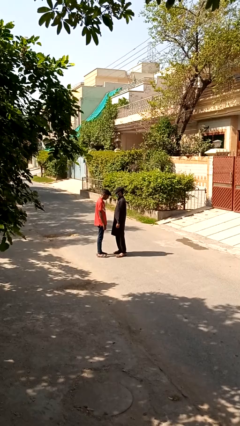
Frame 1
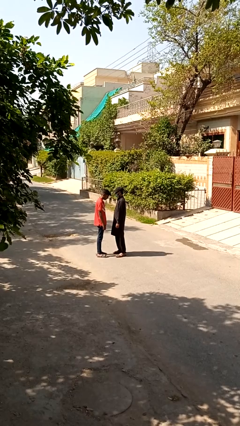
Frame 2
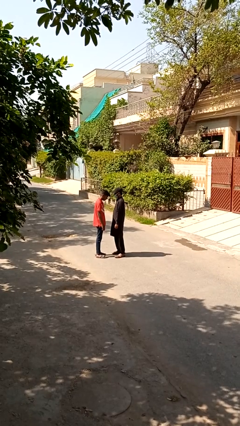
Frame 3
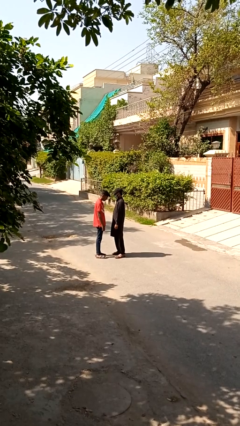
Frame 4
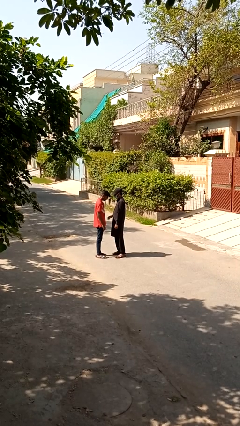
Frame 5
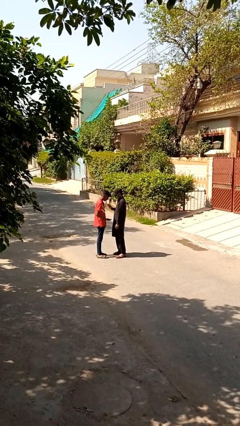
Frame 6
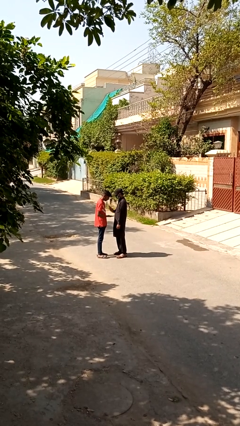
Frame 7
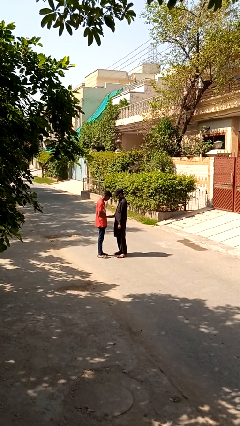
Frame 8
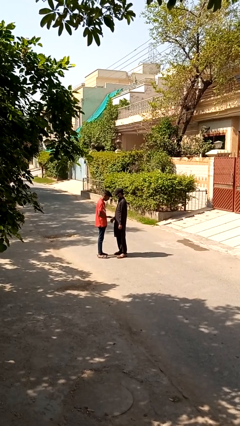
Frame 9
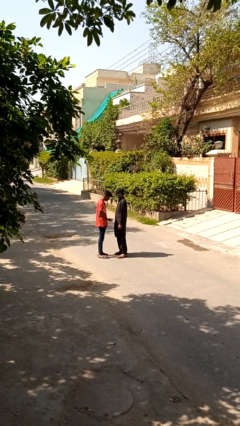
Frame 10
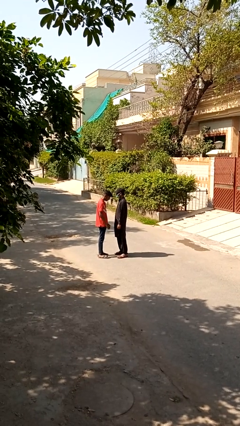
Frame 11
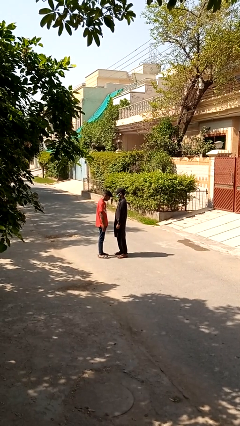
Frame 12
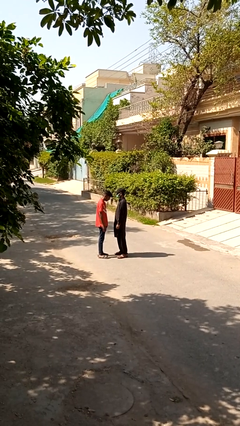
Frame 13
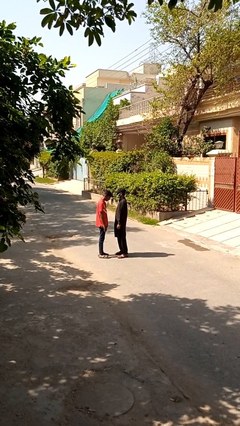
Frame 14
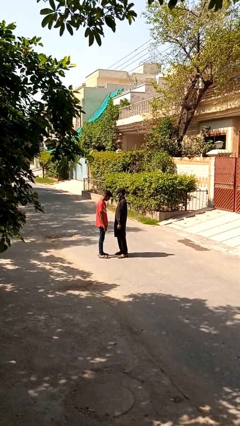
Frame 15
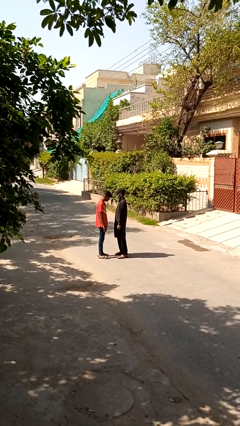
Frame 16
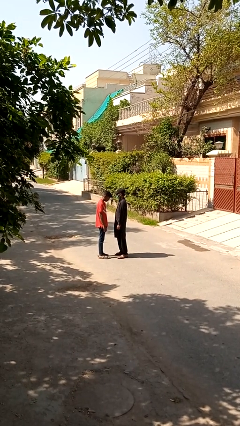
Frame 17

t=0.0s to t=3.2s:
person highfives hand

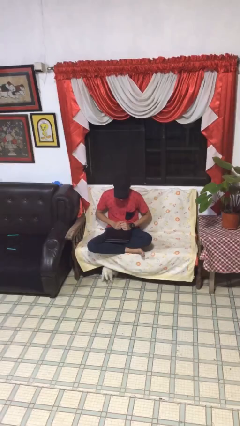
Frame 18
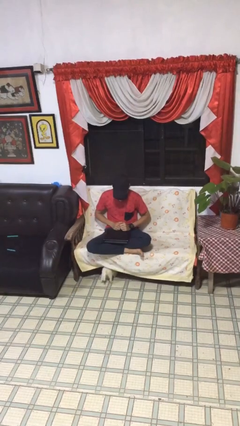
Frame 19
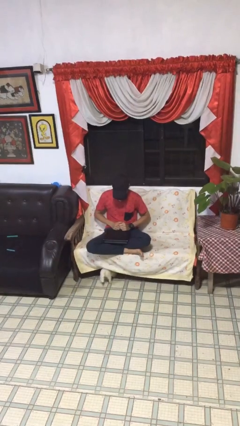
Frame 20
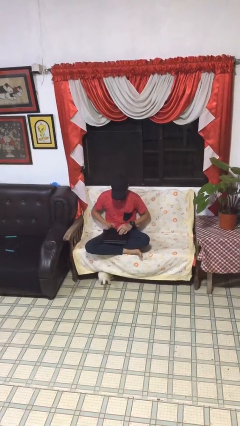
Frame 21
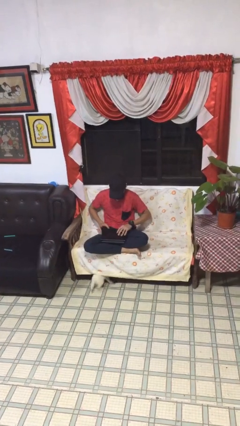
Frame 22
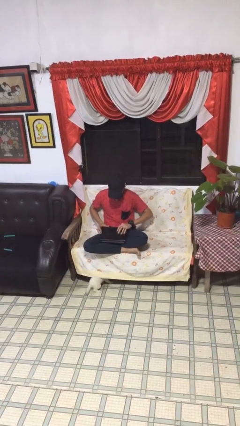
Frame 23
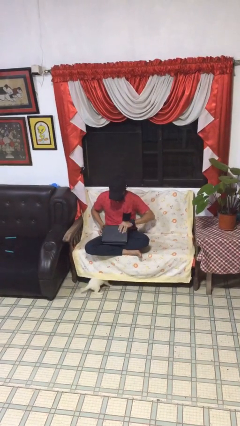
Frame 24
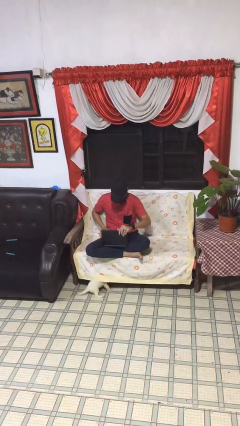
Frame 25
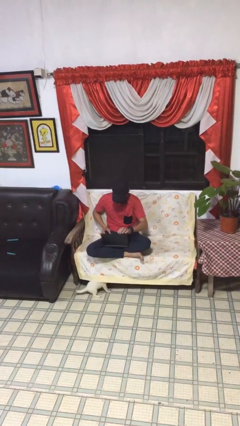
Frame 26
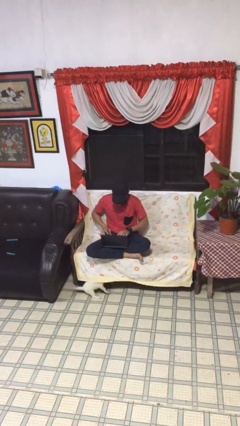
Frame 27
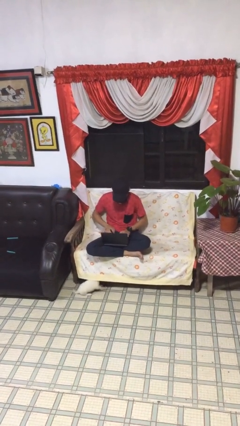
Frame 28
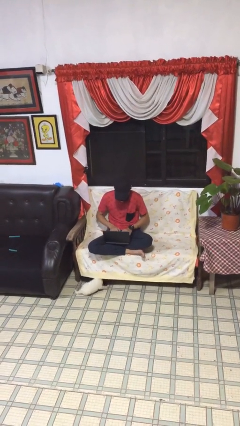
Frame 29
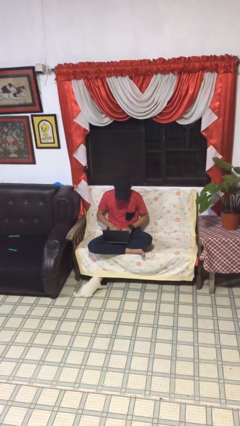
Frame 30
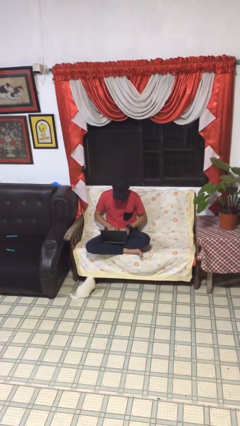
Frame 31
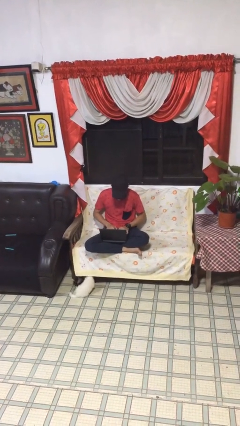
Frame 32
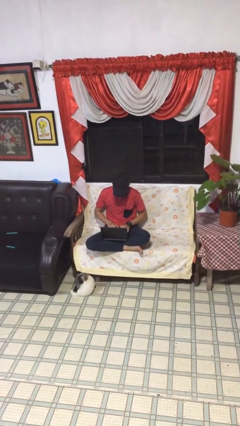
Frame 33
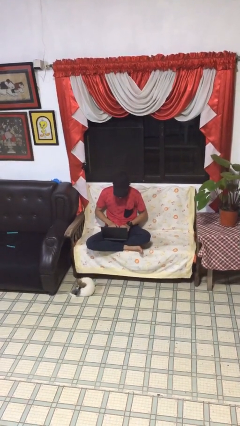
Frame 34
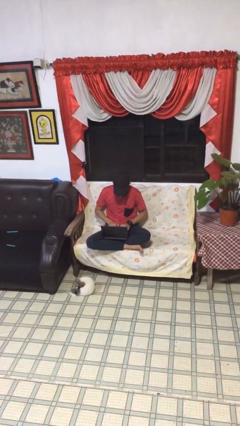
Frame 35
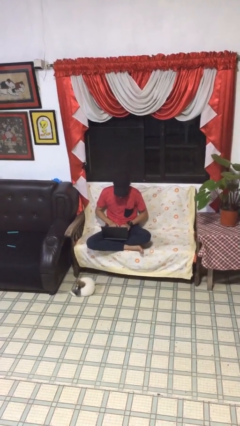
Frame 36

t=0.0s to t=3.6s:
person interacts with laptop

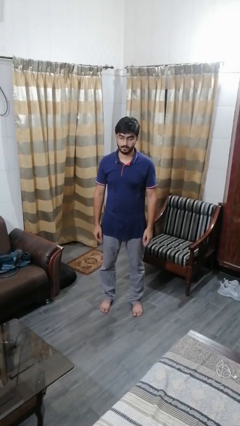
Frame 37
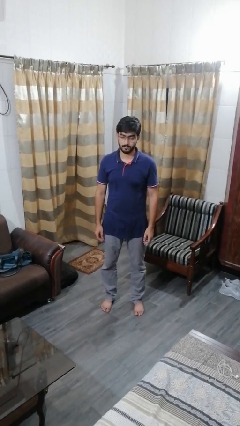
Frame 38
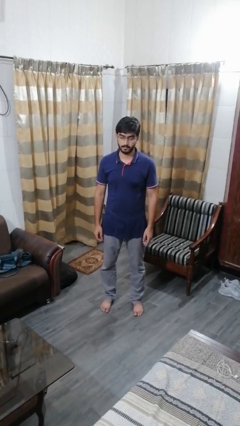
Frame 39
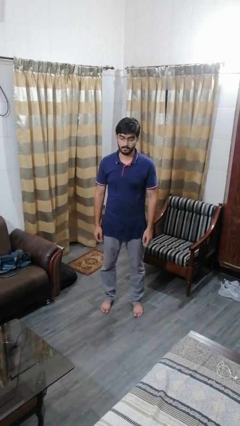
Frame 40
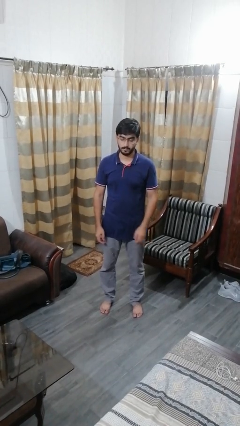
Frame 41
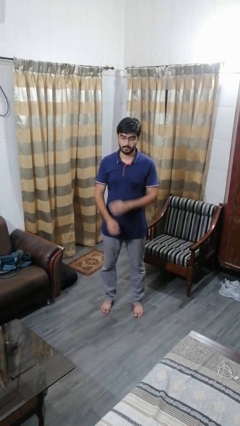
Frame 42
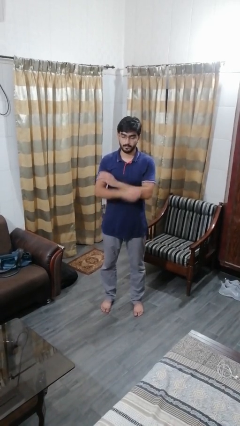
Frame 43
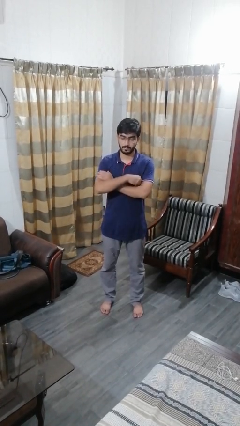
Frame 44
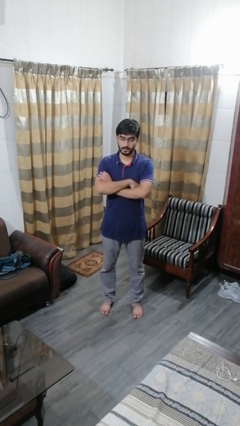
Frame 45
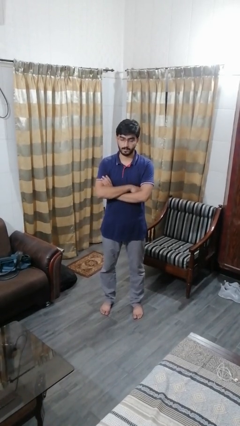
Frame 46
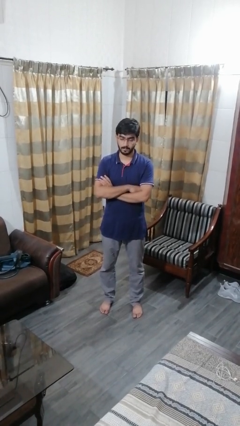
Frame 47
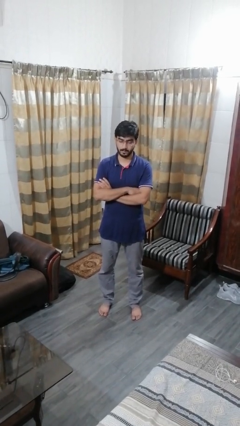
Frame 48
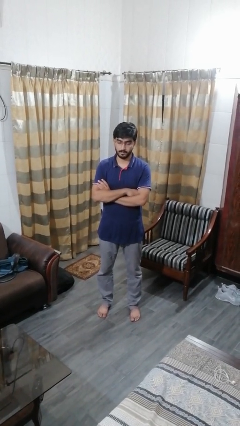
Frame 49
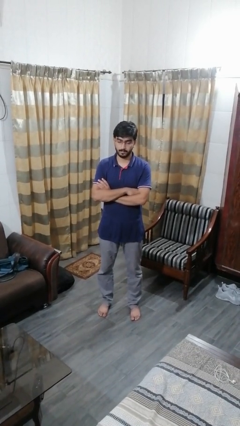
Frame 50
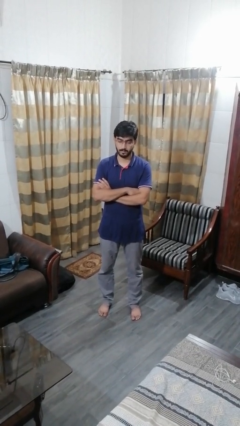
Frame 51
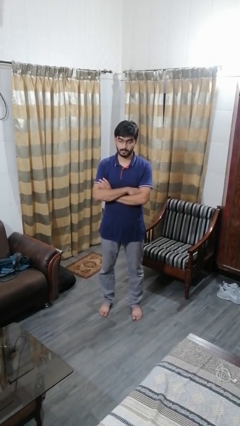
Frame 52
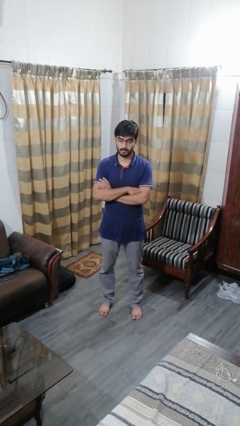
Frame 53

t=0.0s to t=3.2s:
person crosses arms

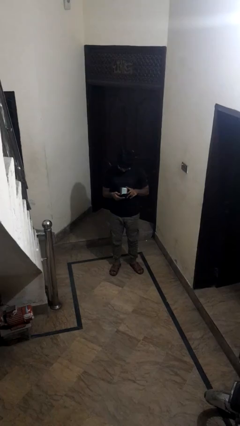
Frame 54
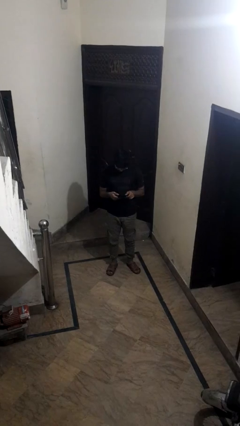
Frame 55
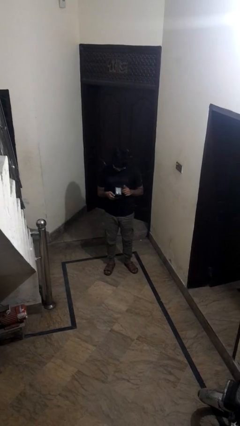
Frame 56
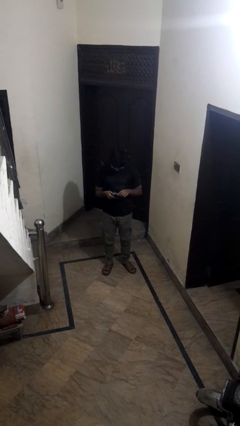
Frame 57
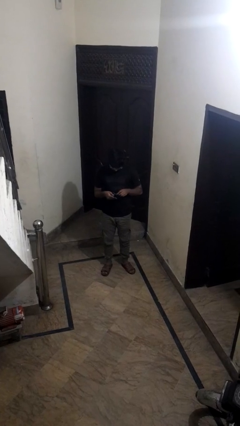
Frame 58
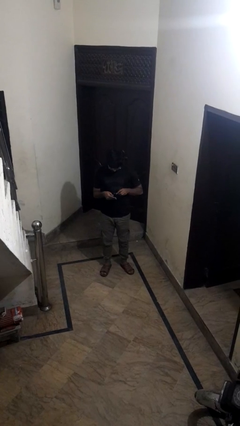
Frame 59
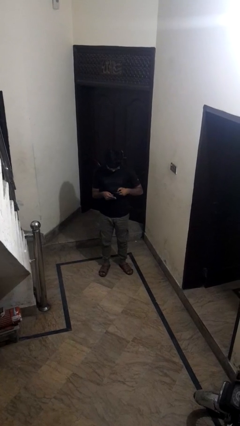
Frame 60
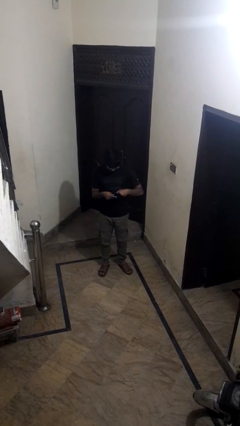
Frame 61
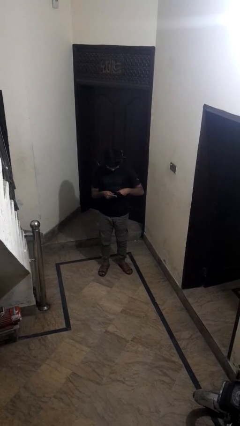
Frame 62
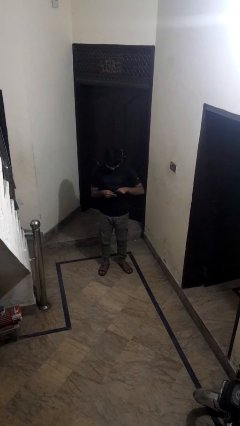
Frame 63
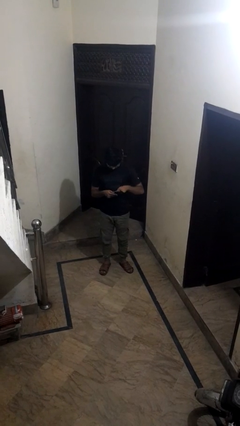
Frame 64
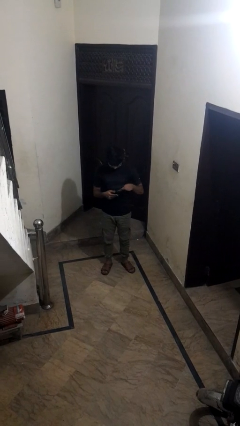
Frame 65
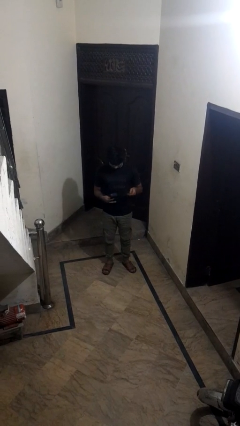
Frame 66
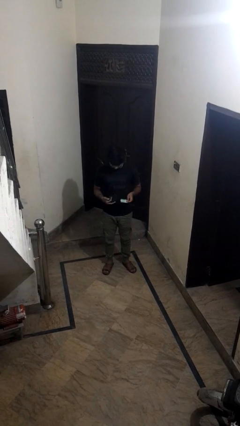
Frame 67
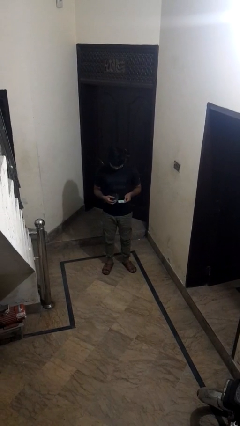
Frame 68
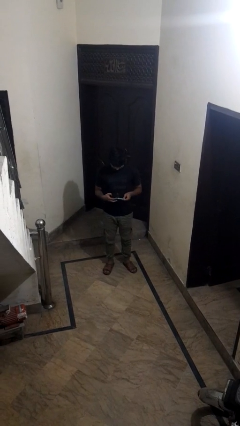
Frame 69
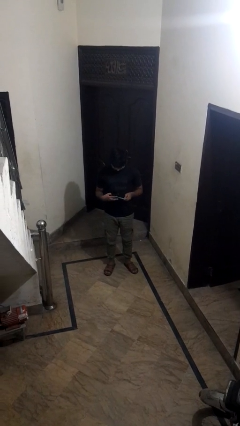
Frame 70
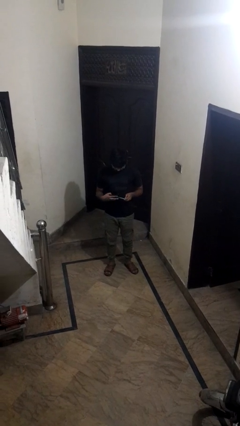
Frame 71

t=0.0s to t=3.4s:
person takes object from purse

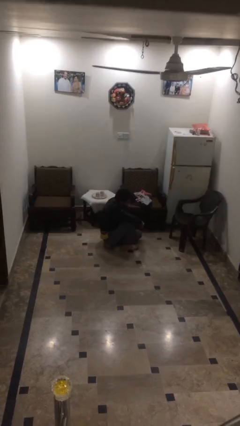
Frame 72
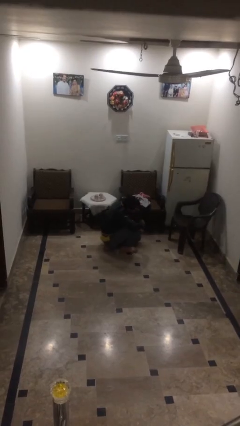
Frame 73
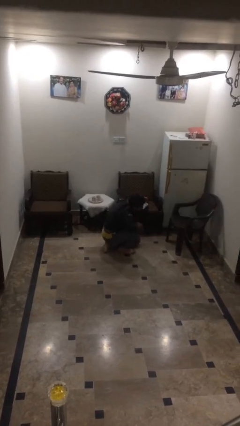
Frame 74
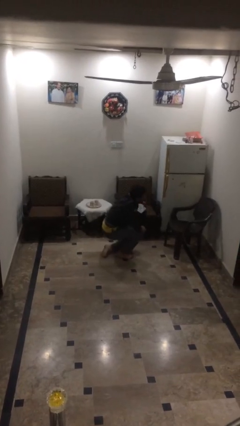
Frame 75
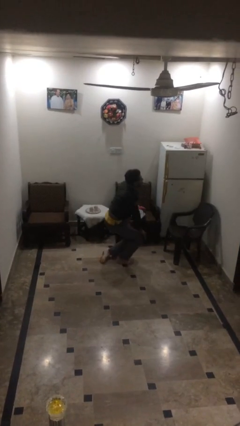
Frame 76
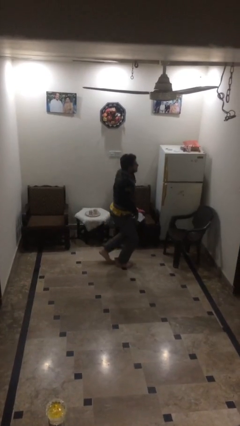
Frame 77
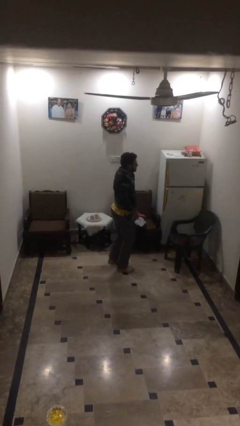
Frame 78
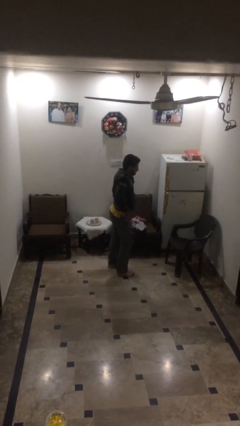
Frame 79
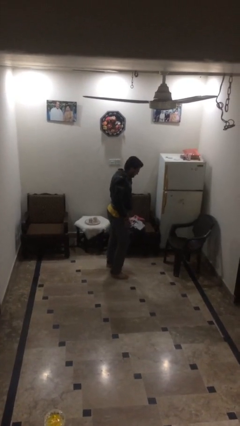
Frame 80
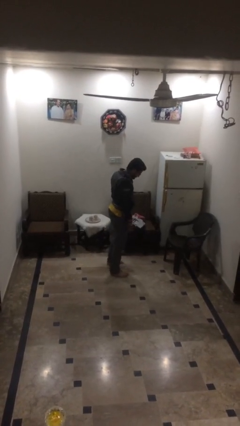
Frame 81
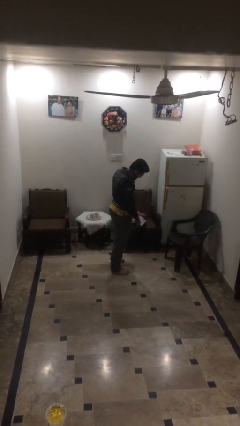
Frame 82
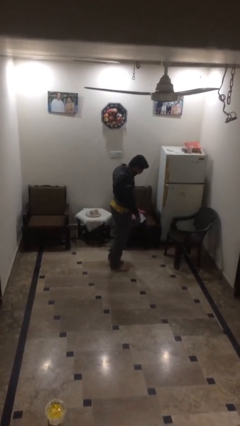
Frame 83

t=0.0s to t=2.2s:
person stands up

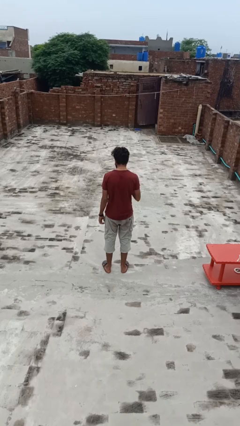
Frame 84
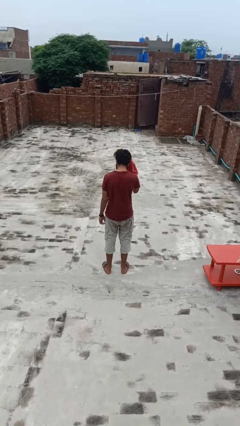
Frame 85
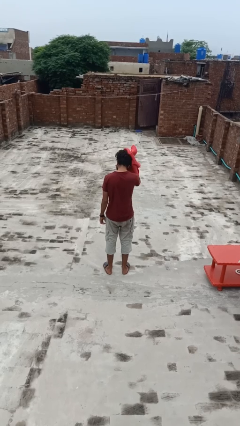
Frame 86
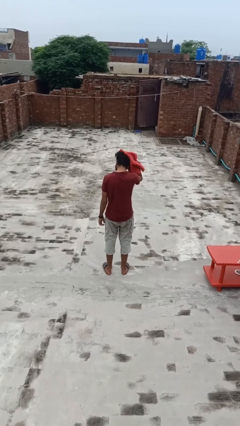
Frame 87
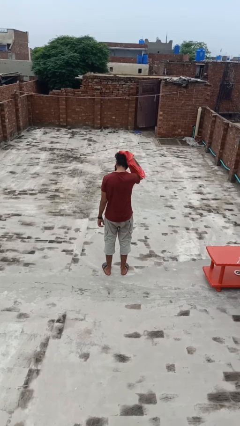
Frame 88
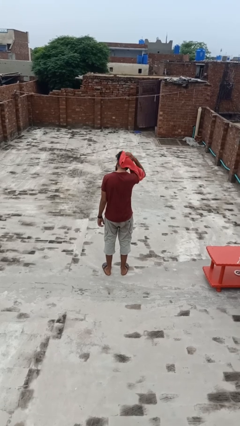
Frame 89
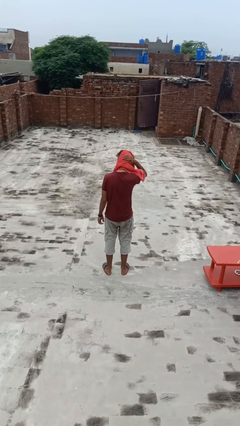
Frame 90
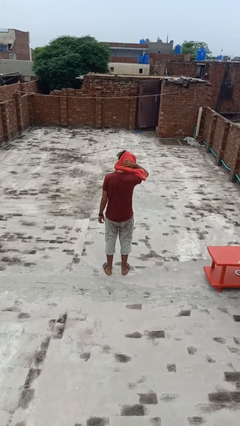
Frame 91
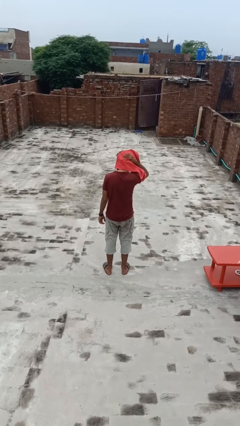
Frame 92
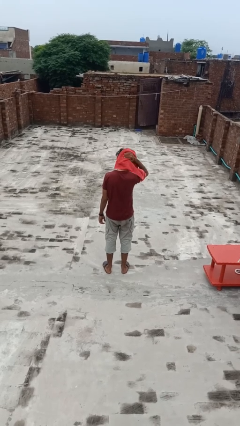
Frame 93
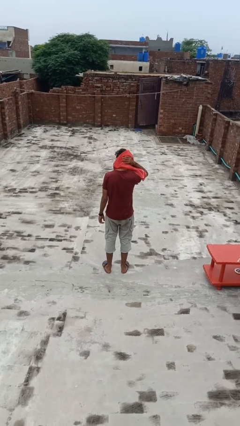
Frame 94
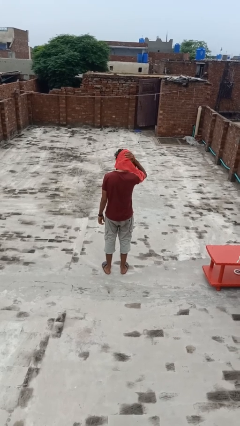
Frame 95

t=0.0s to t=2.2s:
person dries hair with towel
